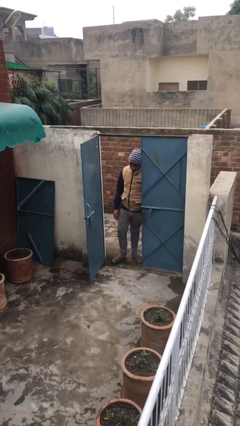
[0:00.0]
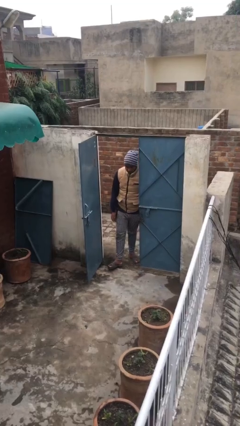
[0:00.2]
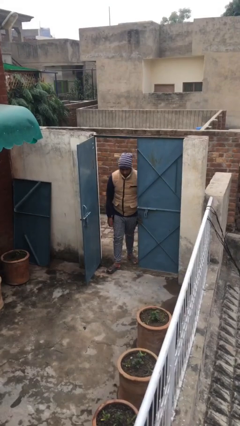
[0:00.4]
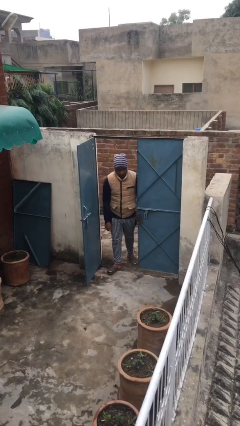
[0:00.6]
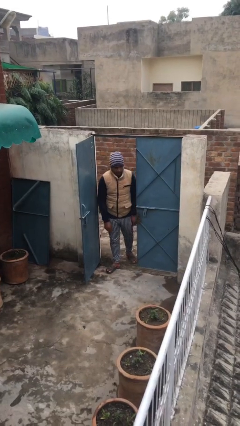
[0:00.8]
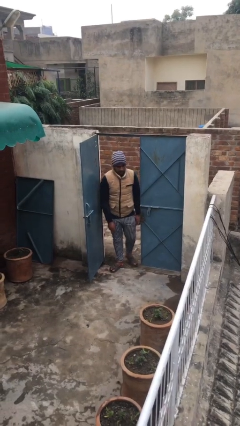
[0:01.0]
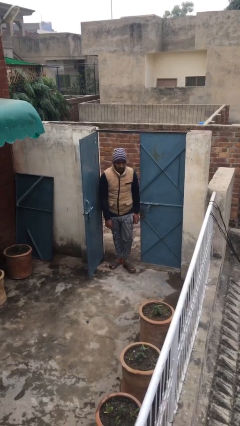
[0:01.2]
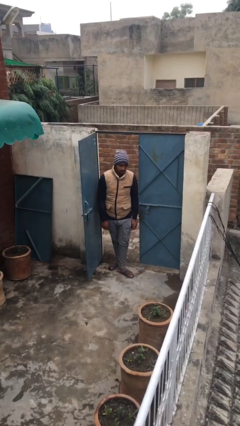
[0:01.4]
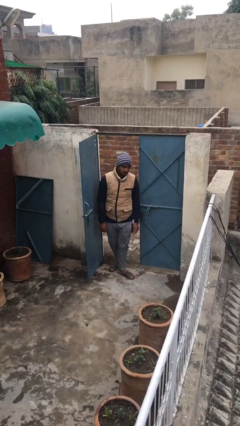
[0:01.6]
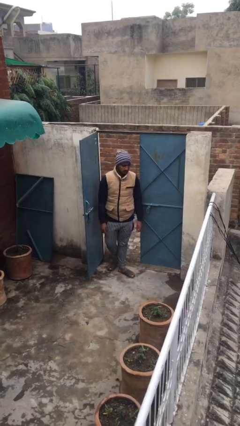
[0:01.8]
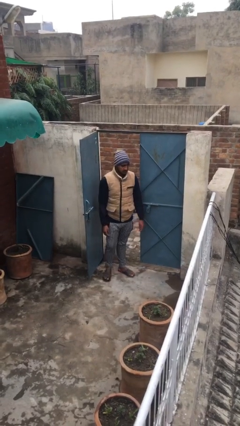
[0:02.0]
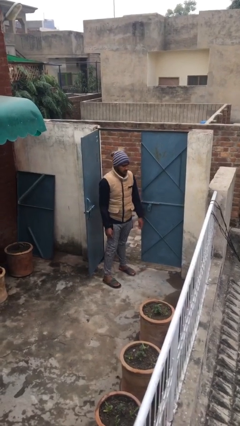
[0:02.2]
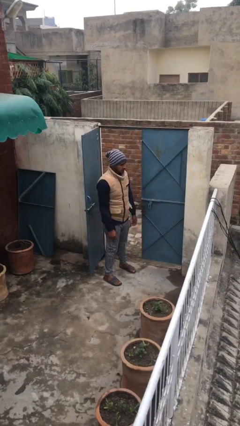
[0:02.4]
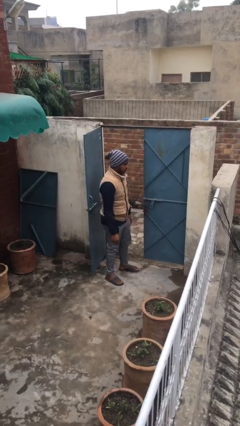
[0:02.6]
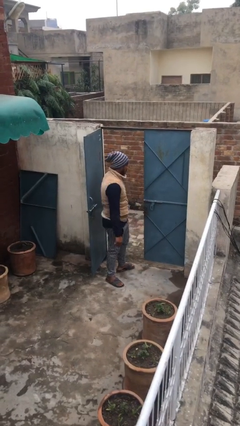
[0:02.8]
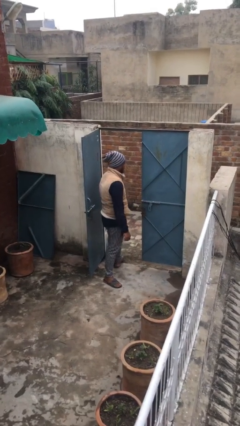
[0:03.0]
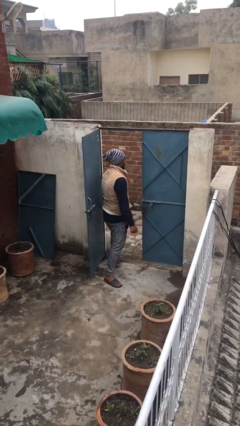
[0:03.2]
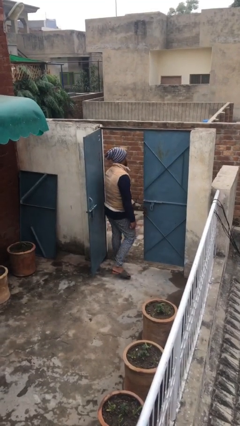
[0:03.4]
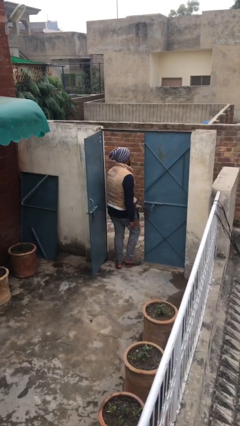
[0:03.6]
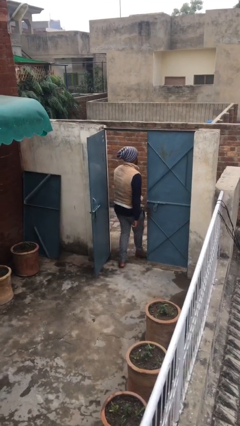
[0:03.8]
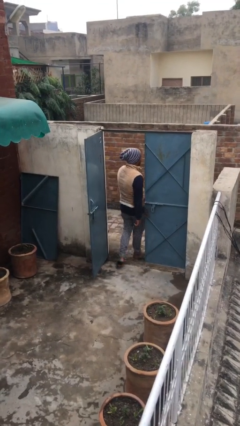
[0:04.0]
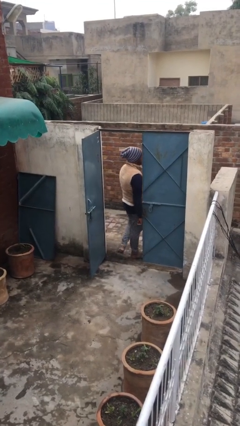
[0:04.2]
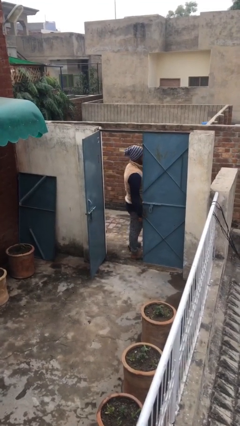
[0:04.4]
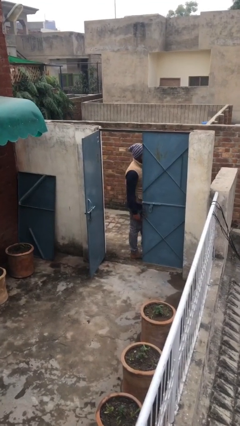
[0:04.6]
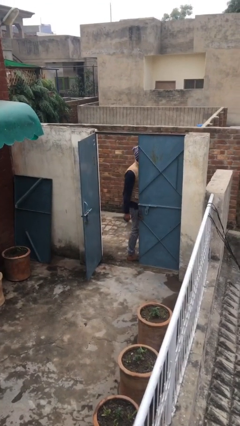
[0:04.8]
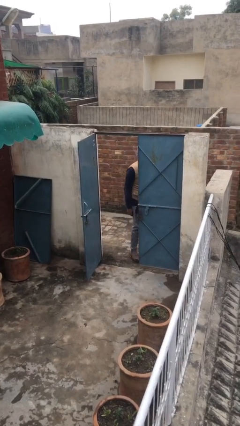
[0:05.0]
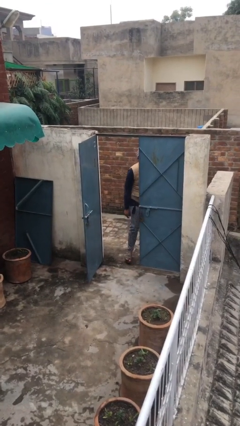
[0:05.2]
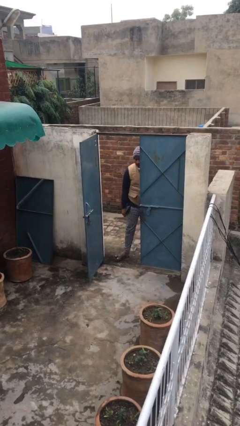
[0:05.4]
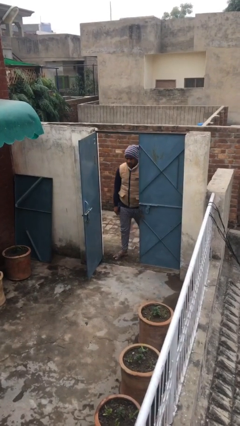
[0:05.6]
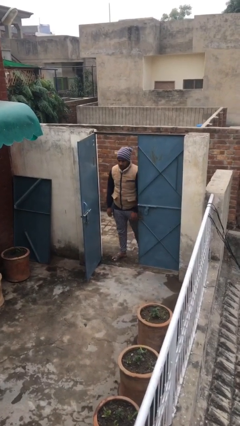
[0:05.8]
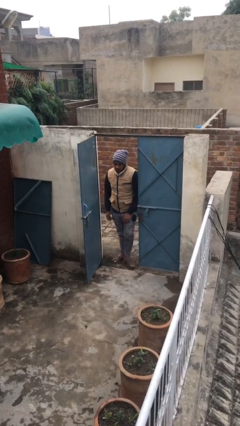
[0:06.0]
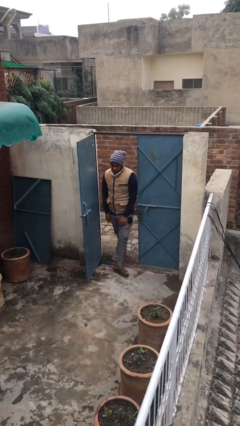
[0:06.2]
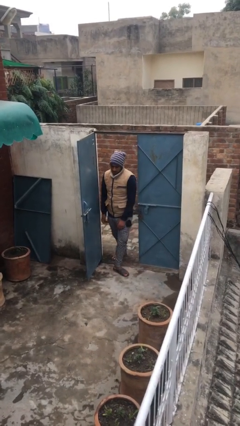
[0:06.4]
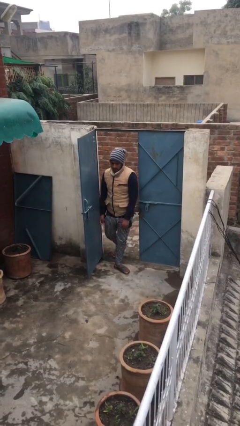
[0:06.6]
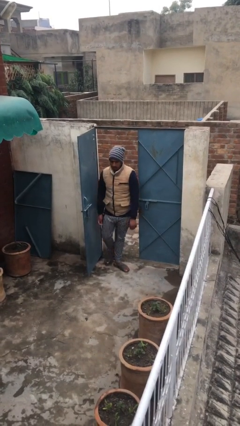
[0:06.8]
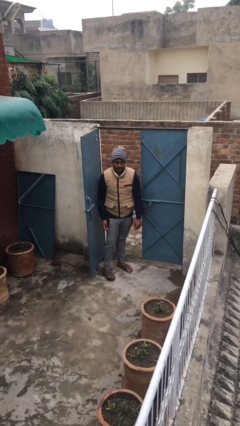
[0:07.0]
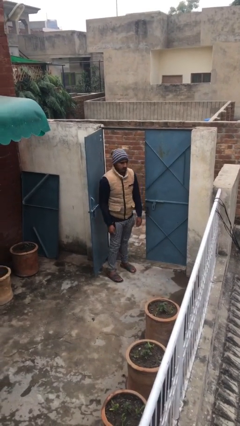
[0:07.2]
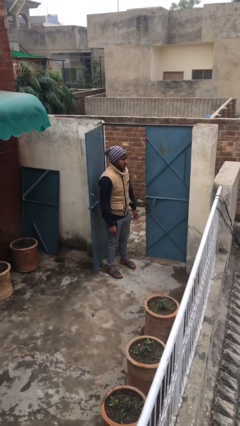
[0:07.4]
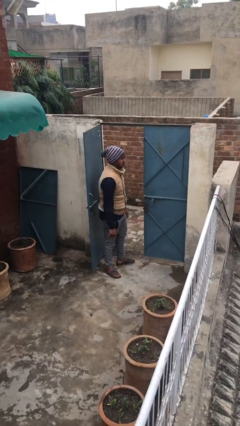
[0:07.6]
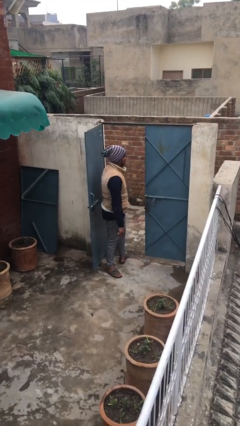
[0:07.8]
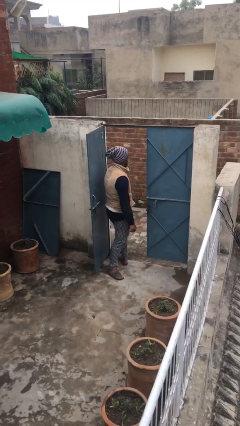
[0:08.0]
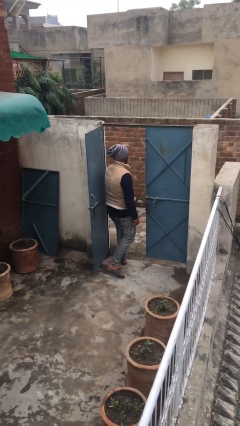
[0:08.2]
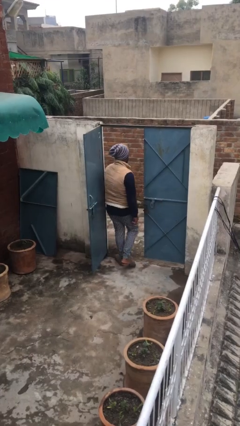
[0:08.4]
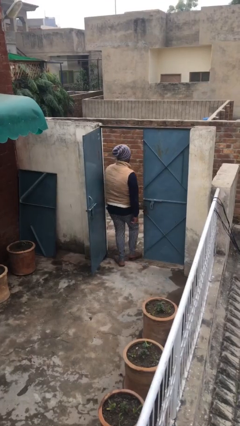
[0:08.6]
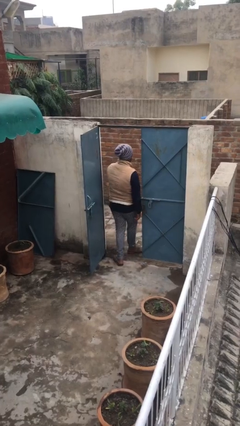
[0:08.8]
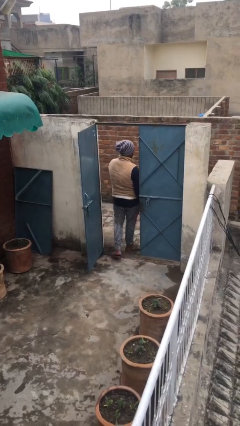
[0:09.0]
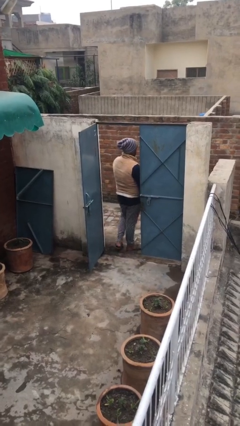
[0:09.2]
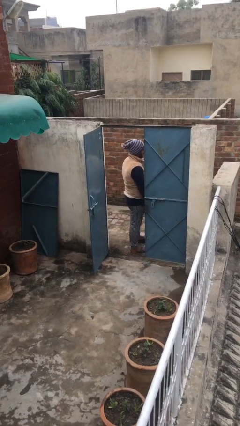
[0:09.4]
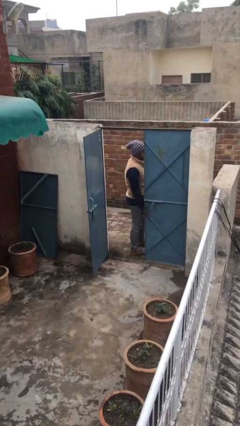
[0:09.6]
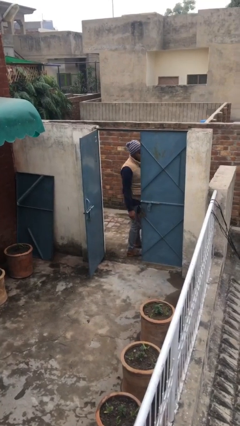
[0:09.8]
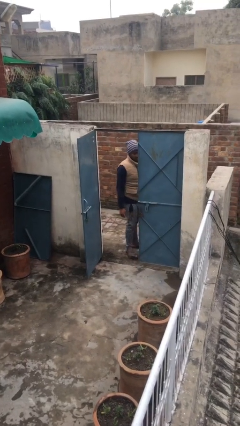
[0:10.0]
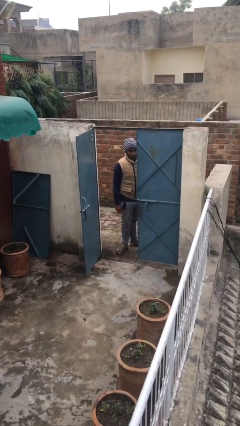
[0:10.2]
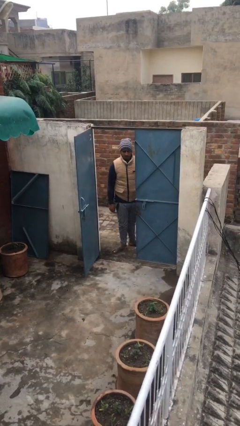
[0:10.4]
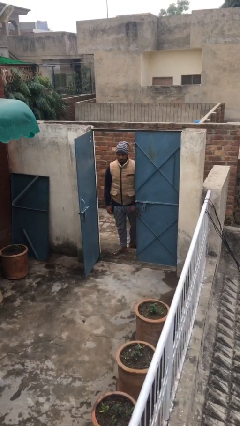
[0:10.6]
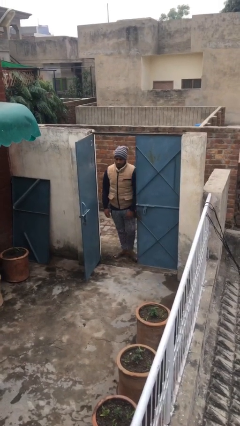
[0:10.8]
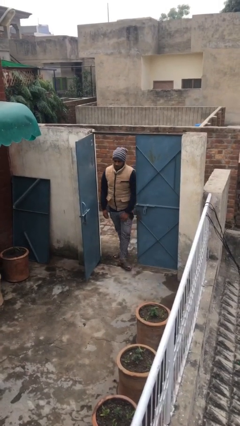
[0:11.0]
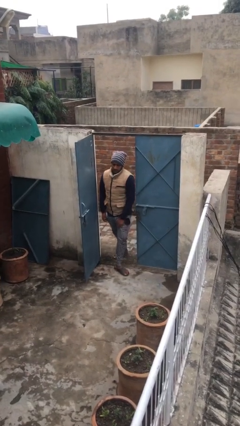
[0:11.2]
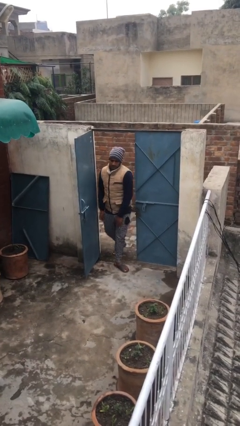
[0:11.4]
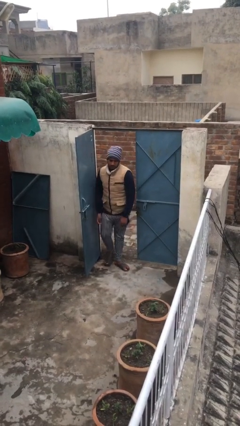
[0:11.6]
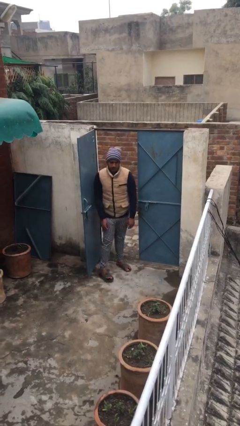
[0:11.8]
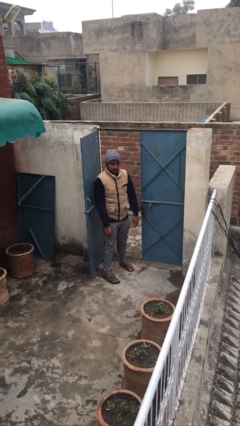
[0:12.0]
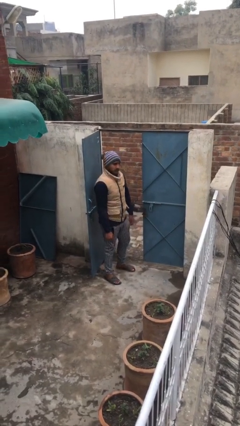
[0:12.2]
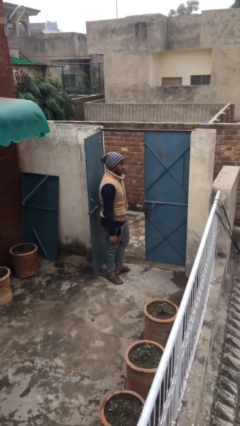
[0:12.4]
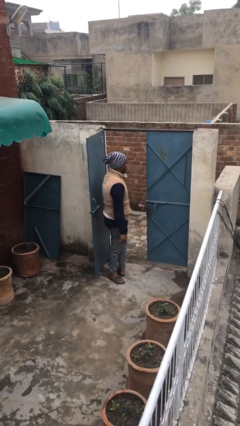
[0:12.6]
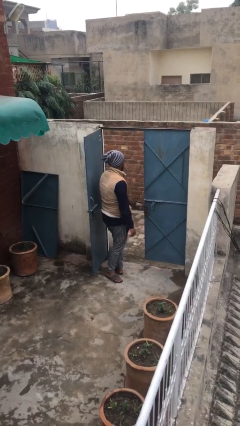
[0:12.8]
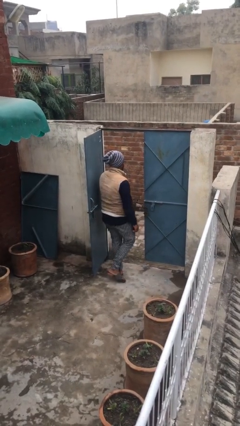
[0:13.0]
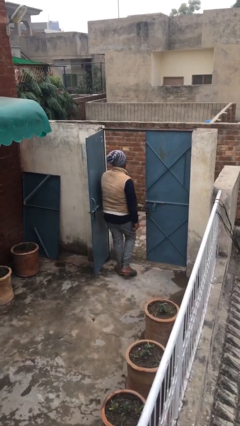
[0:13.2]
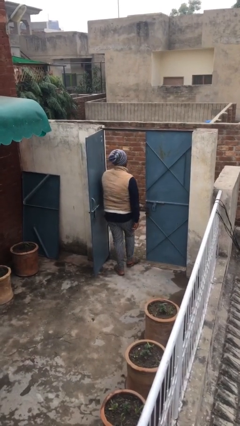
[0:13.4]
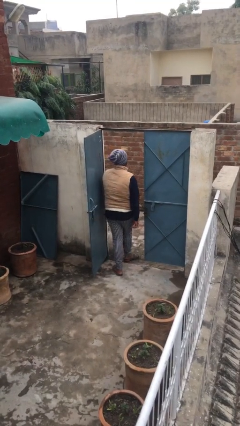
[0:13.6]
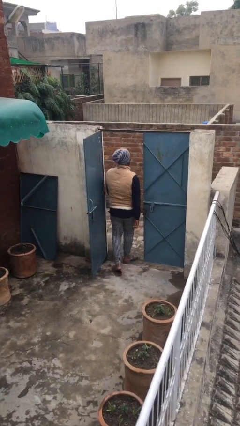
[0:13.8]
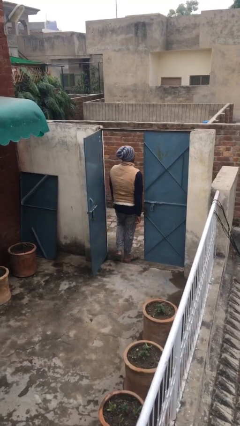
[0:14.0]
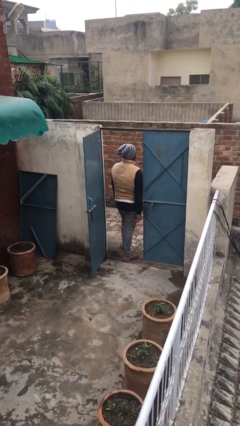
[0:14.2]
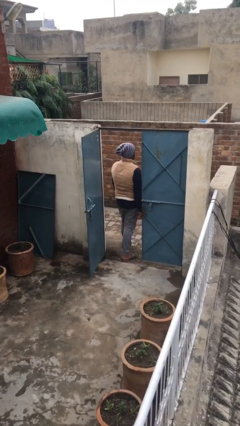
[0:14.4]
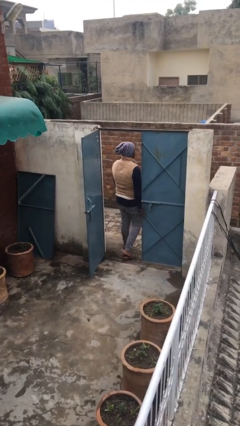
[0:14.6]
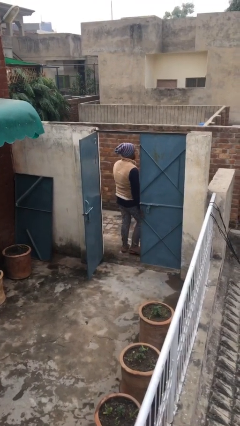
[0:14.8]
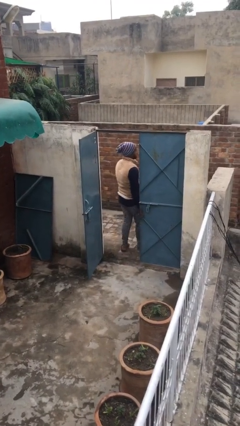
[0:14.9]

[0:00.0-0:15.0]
person texts on phone

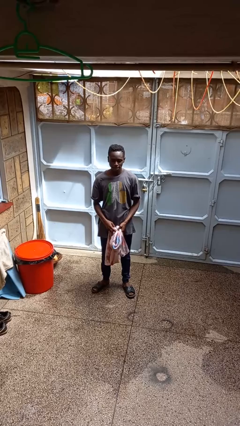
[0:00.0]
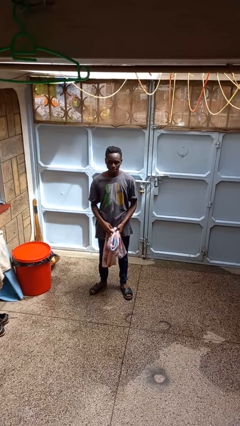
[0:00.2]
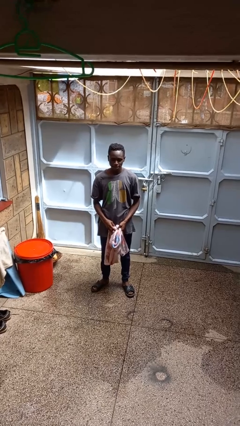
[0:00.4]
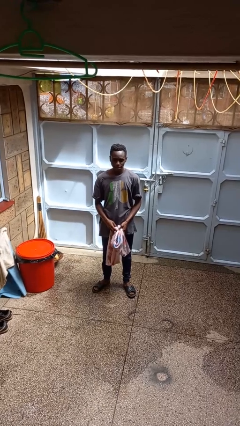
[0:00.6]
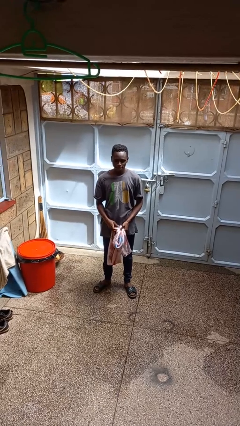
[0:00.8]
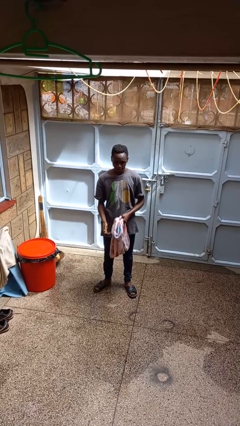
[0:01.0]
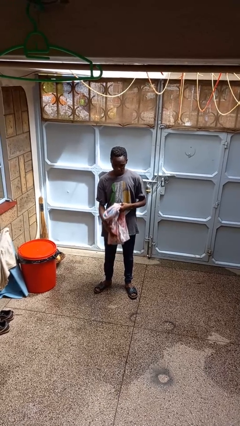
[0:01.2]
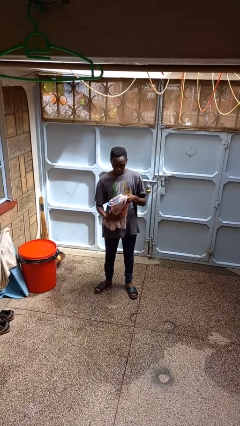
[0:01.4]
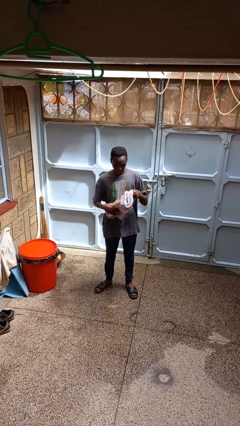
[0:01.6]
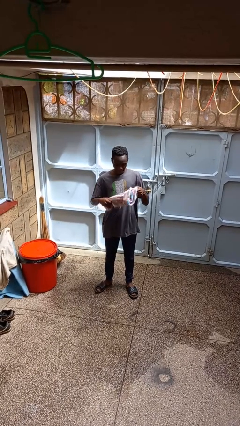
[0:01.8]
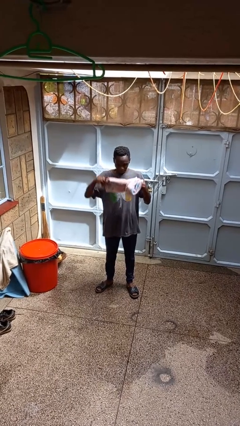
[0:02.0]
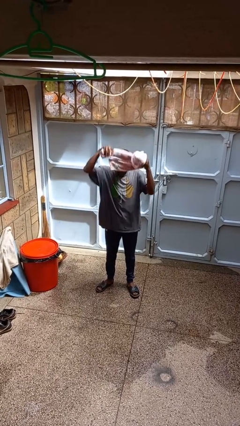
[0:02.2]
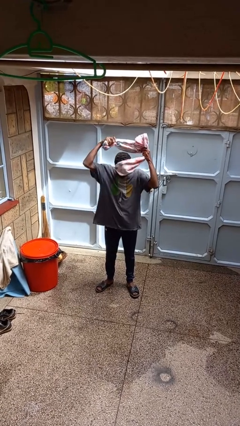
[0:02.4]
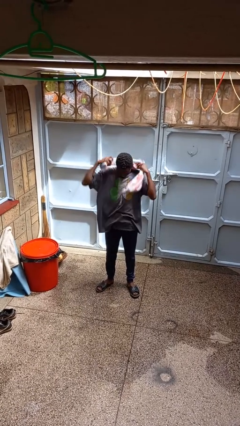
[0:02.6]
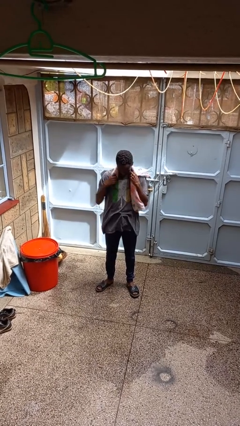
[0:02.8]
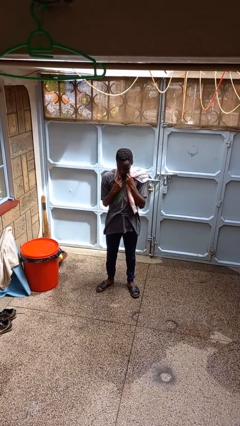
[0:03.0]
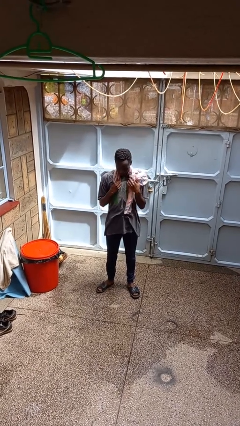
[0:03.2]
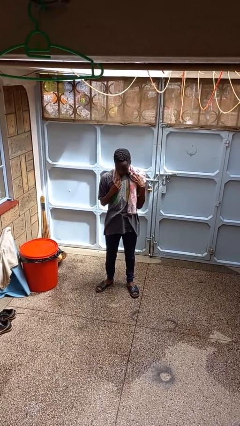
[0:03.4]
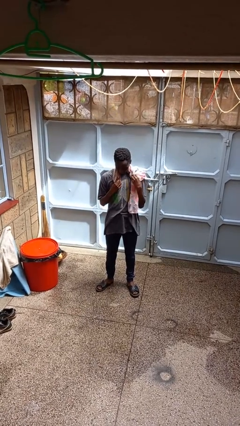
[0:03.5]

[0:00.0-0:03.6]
person puts on scarf
